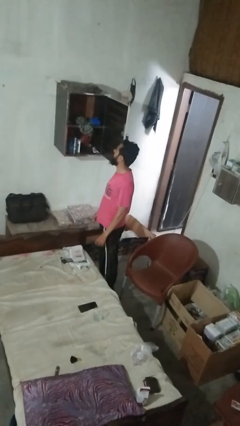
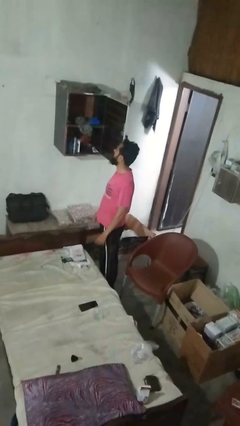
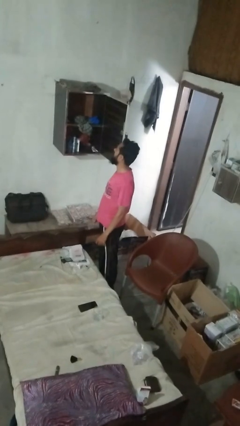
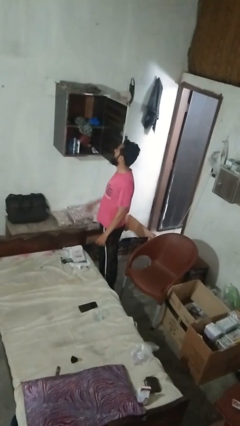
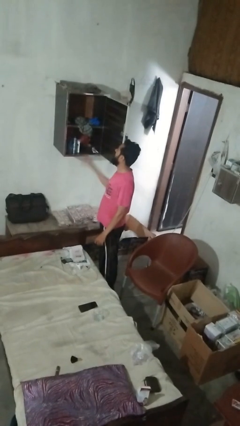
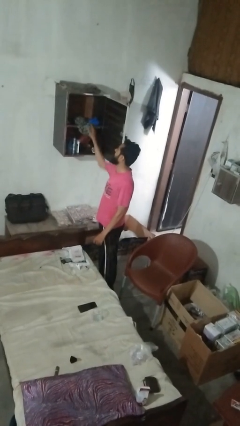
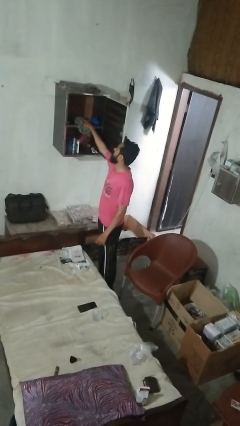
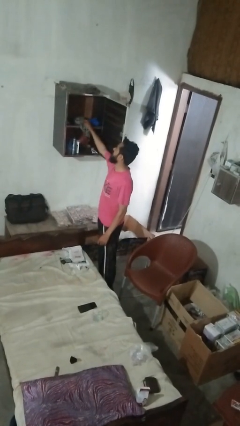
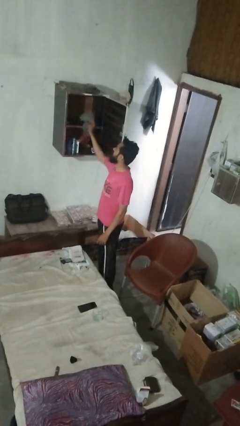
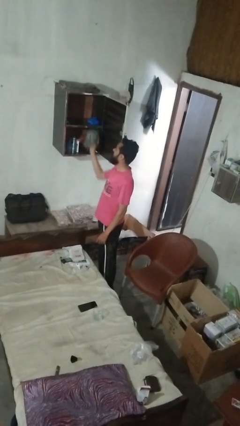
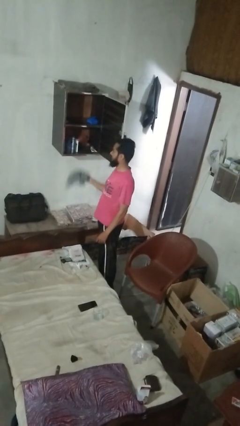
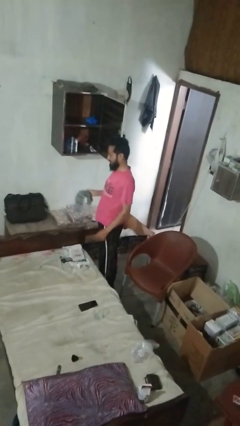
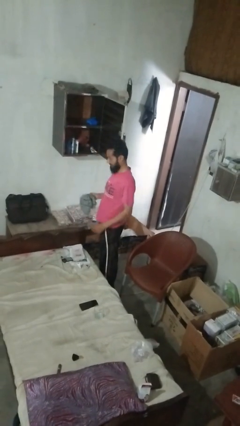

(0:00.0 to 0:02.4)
person takes clothes from dresser

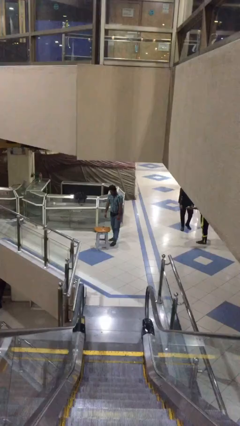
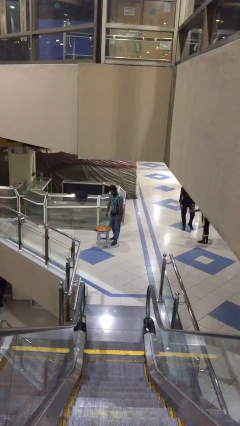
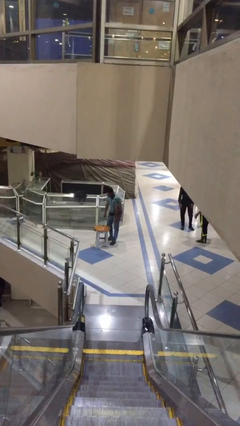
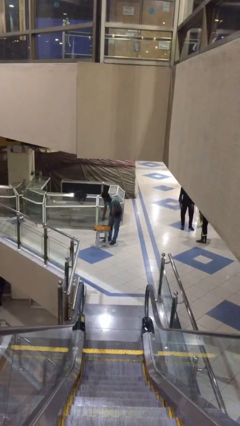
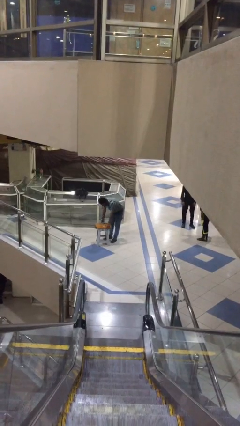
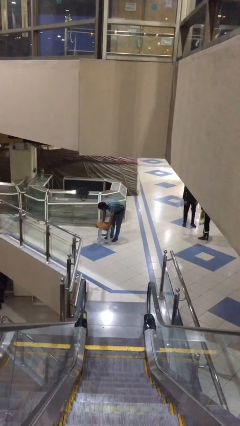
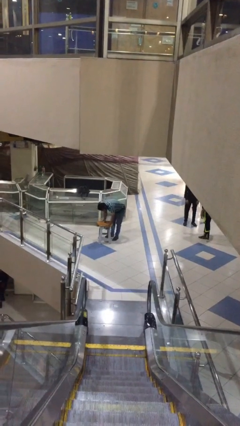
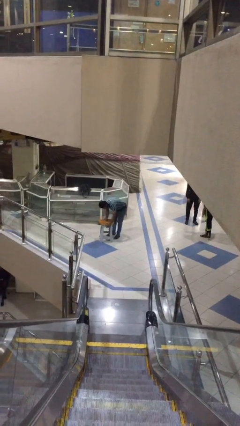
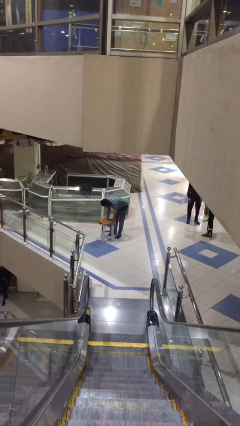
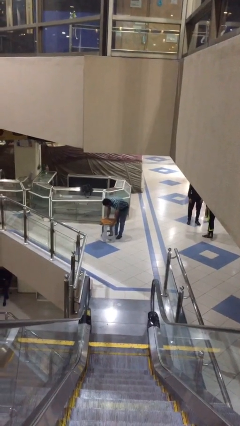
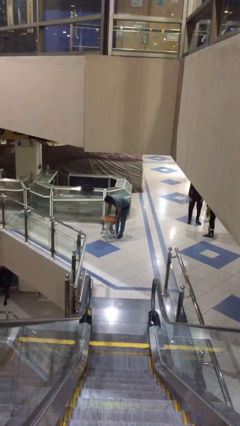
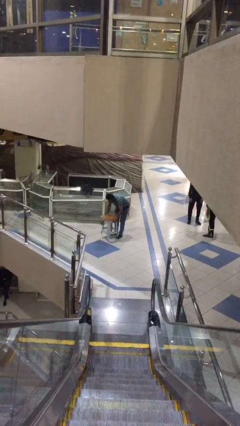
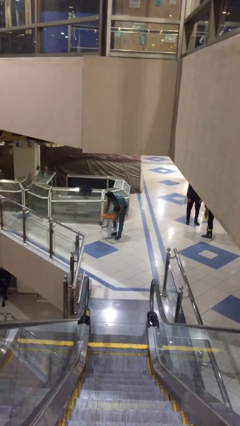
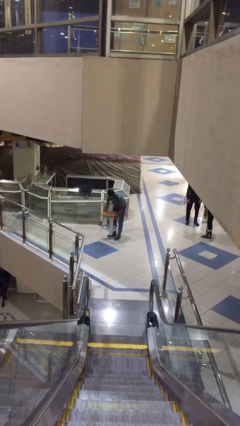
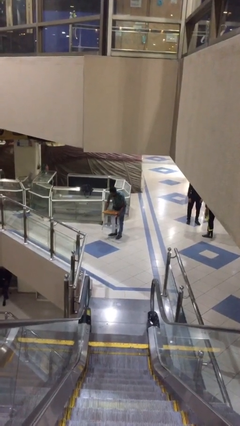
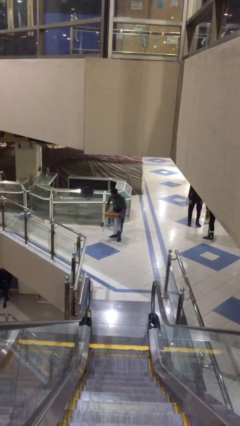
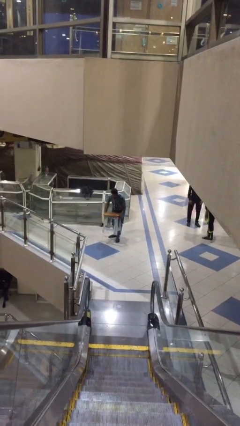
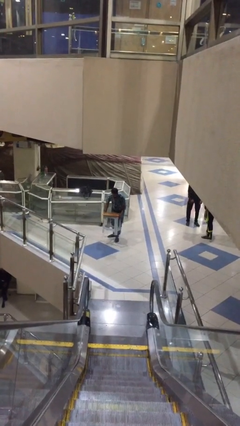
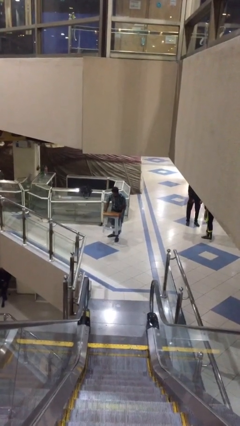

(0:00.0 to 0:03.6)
person picks up object from floor

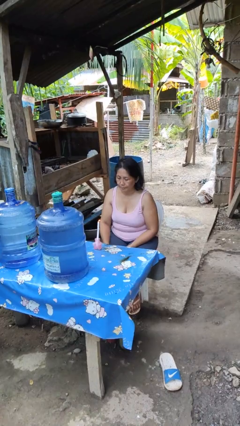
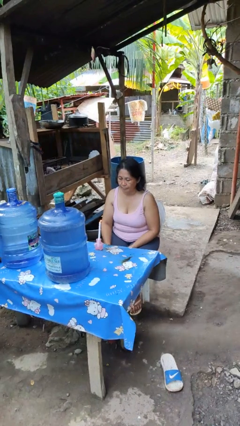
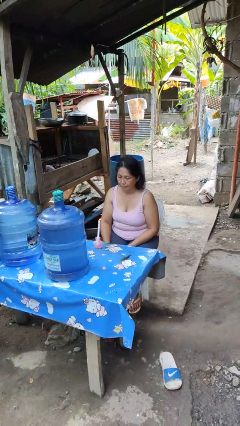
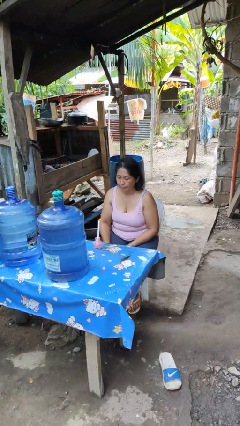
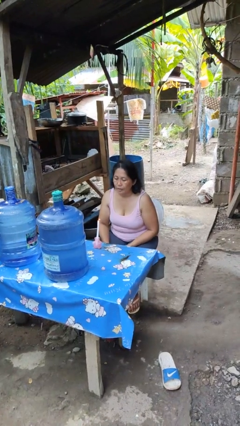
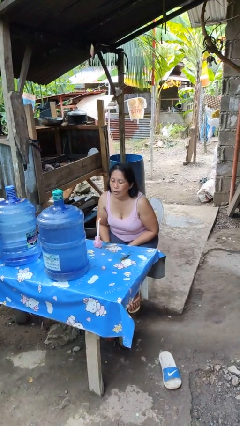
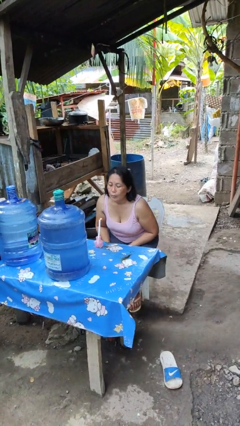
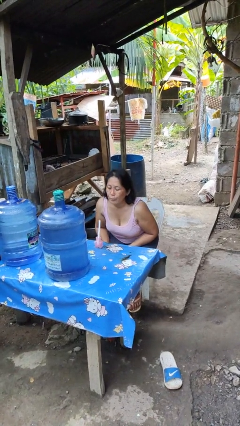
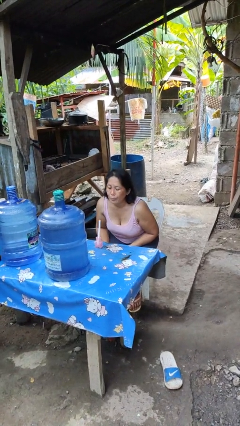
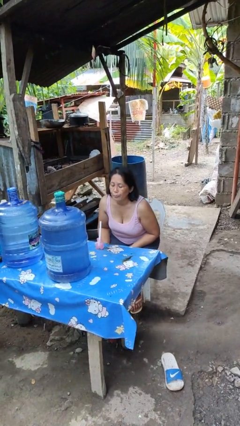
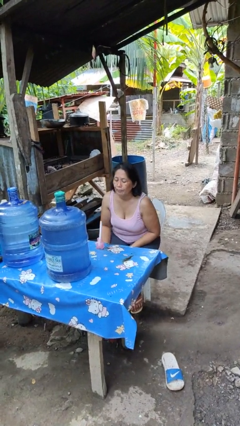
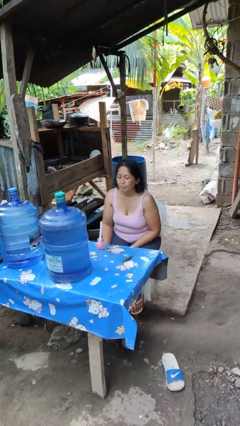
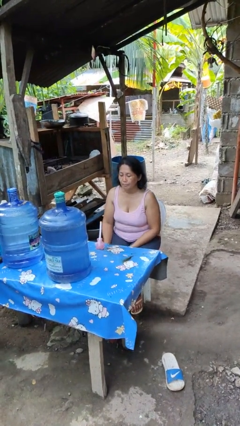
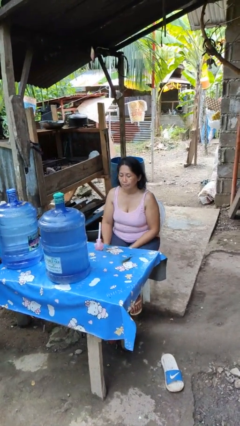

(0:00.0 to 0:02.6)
person extinguishes candle

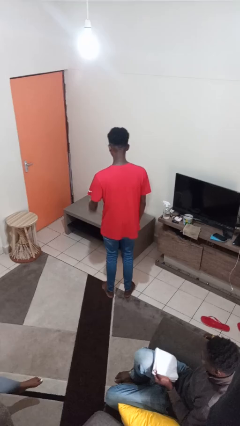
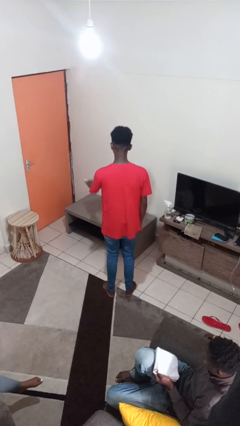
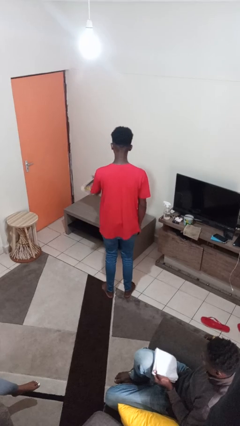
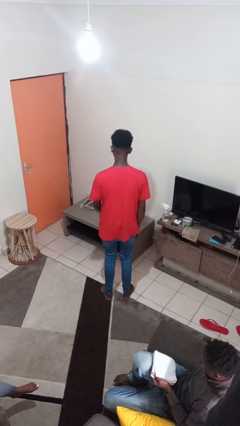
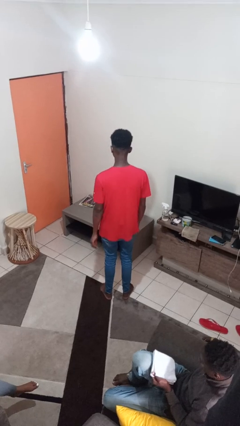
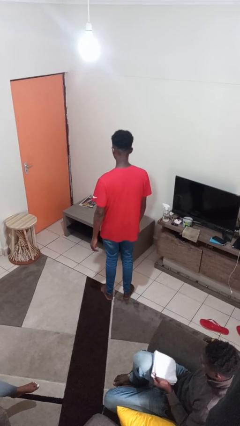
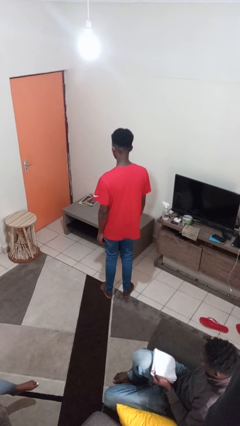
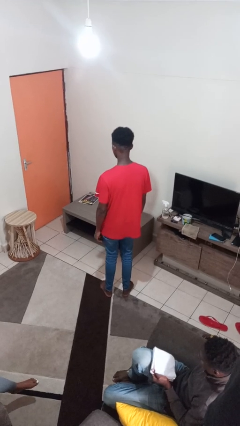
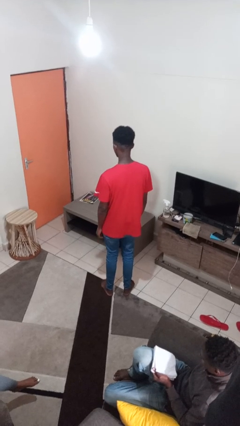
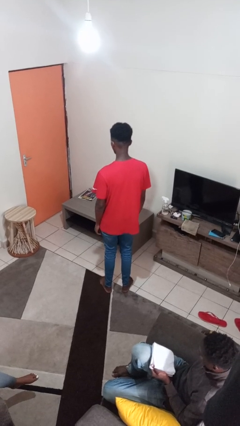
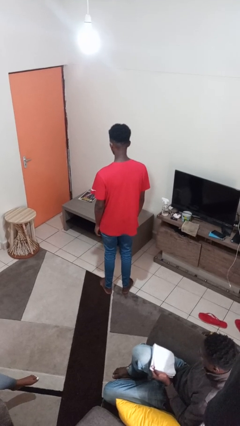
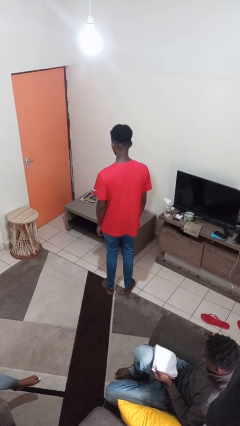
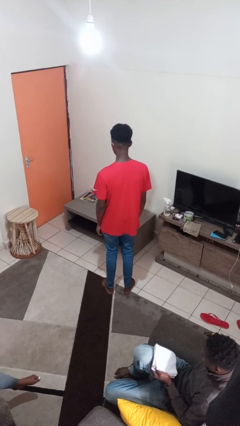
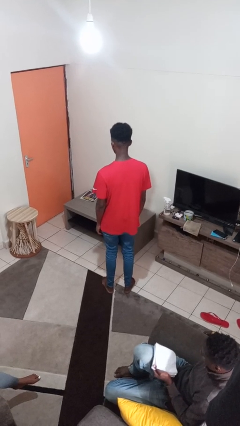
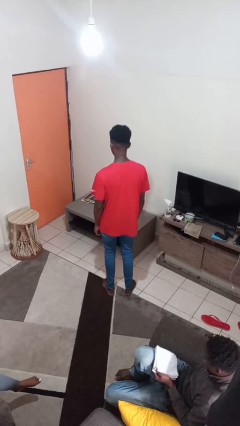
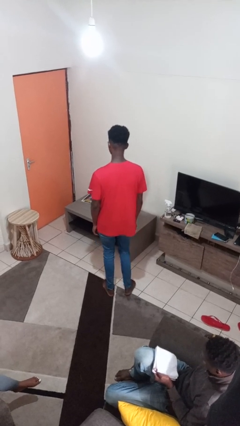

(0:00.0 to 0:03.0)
person throws object on table

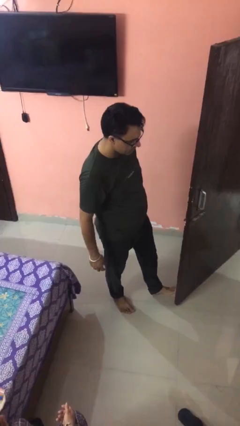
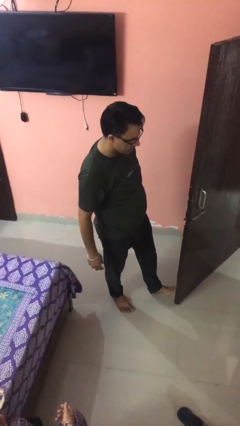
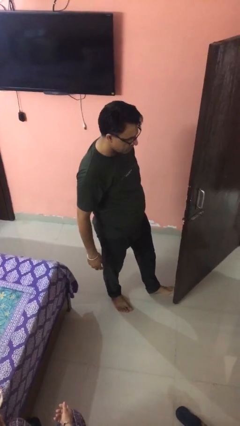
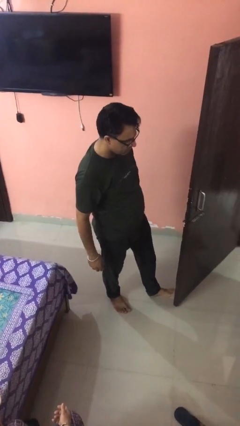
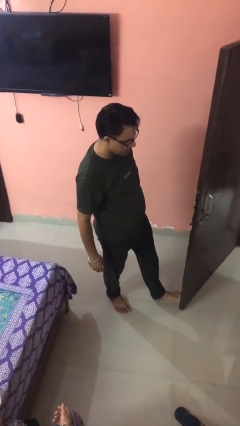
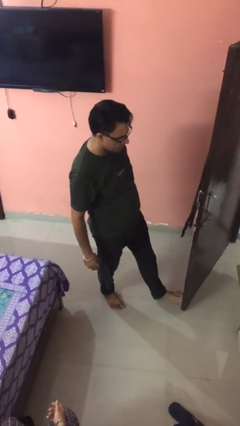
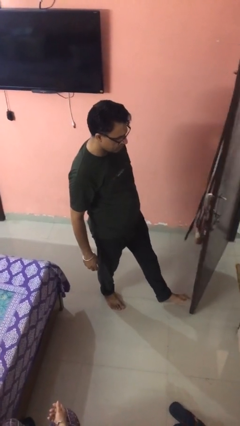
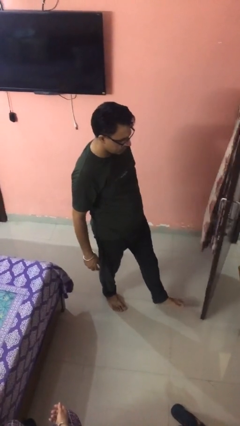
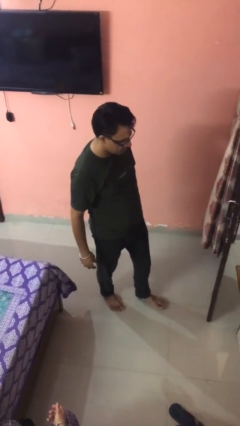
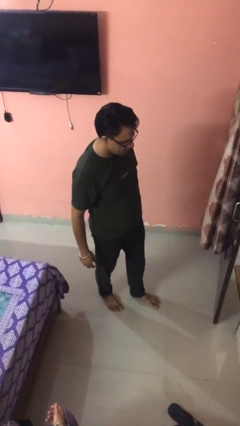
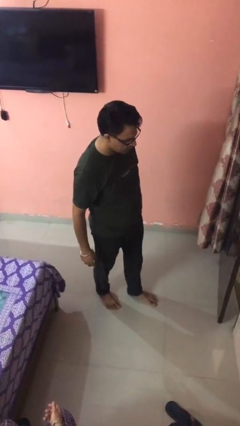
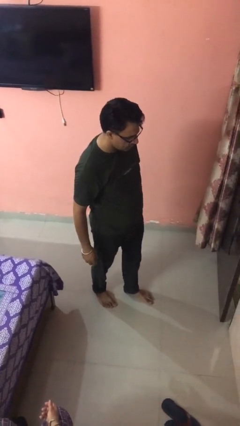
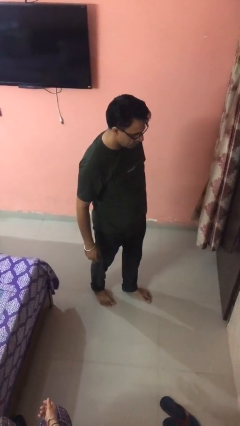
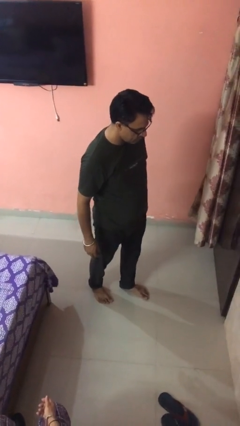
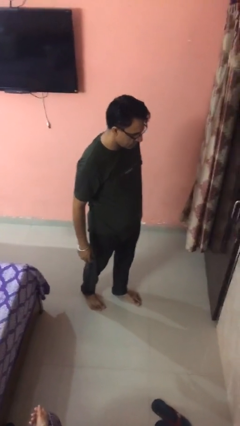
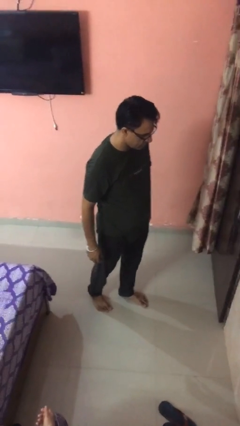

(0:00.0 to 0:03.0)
person closes door with foot

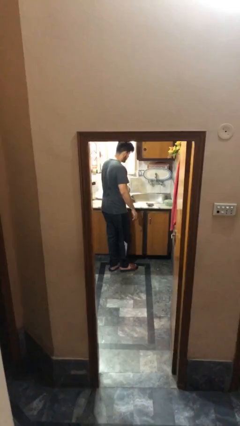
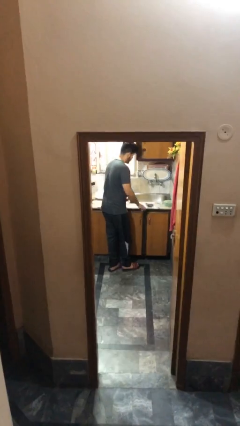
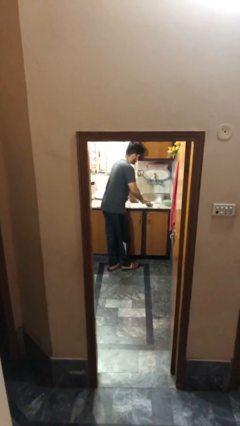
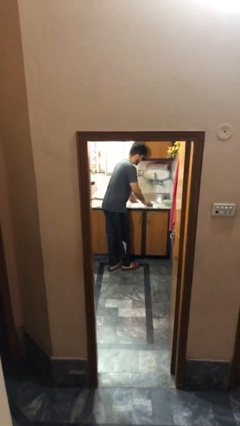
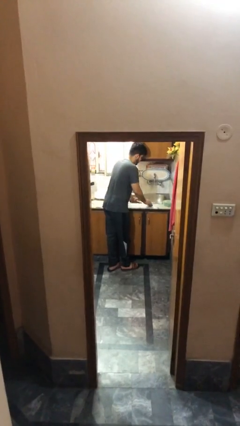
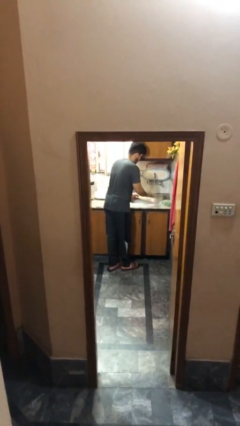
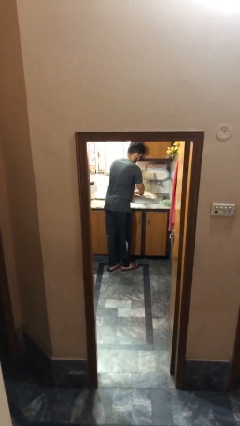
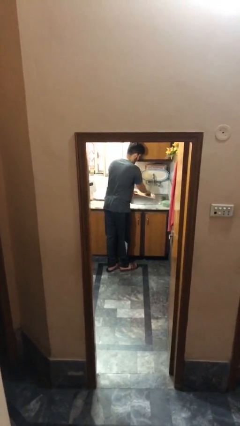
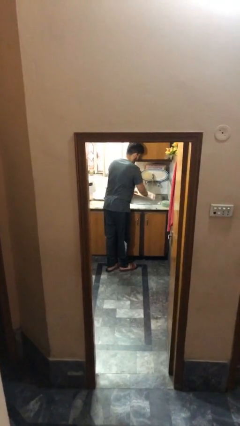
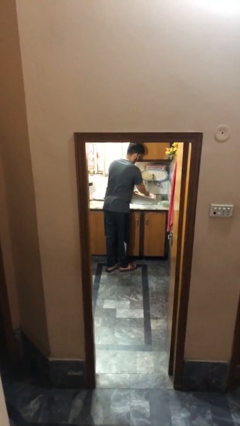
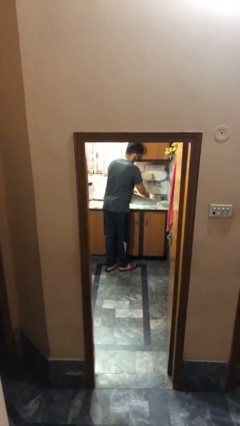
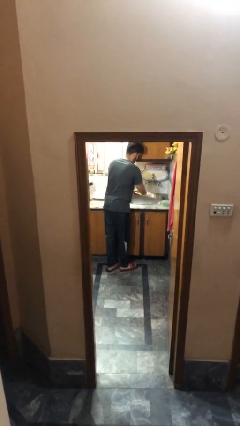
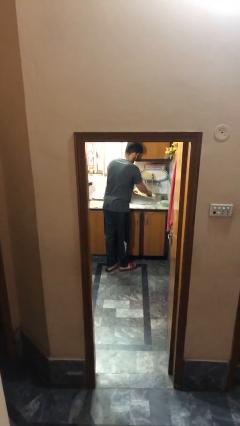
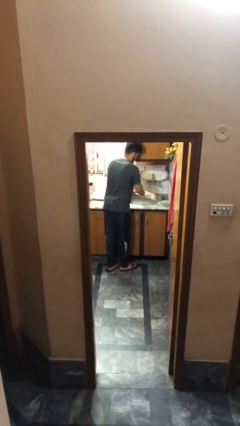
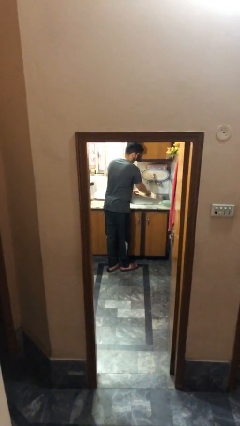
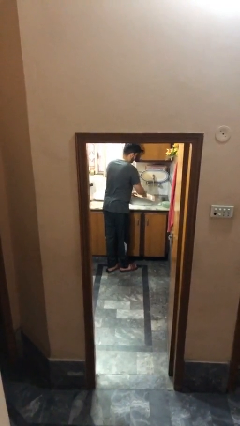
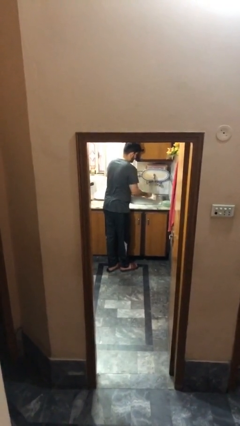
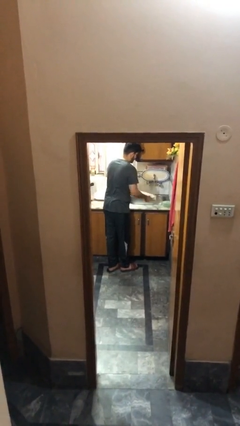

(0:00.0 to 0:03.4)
person washes dish
